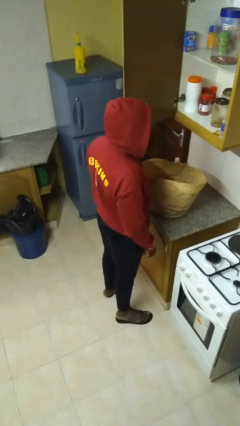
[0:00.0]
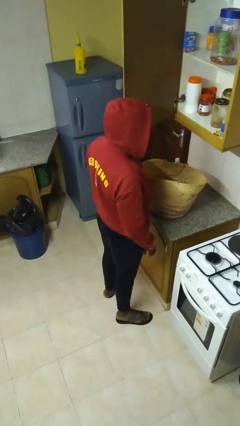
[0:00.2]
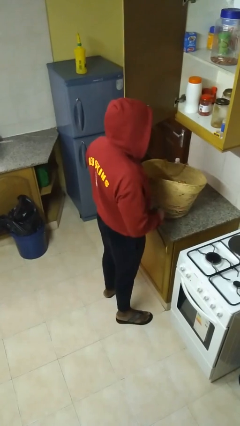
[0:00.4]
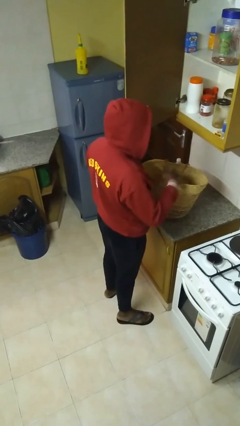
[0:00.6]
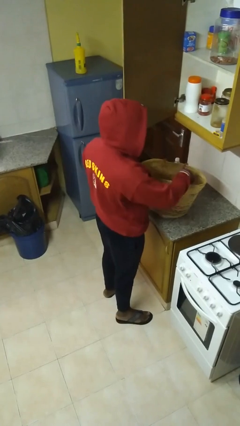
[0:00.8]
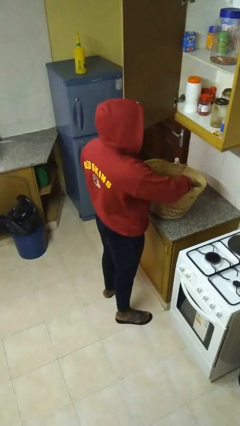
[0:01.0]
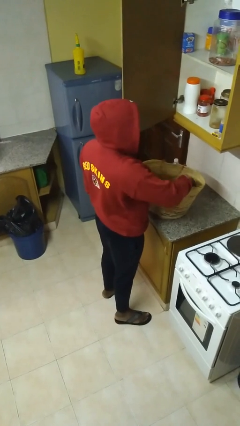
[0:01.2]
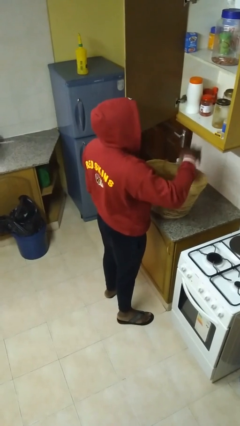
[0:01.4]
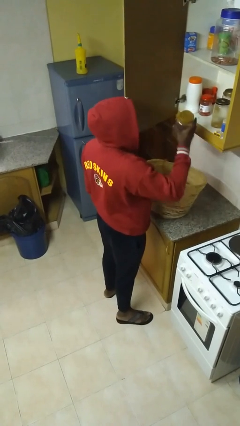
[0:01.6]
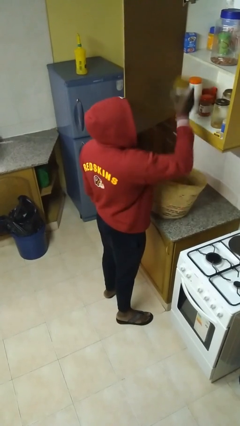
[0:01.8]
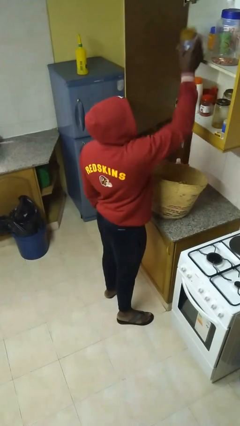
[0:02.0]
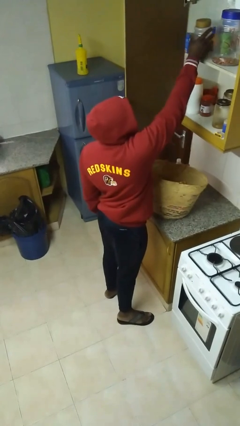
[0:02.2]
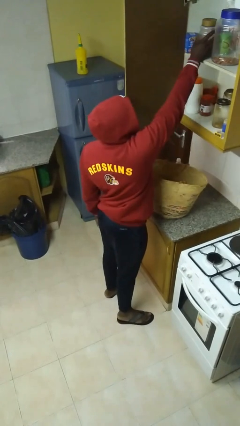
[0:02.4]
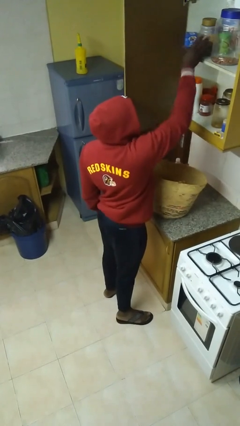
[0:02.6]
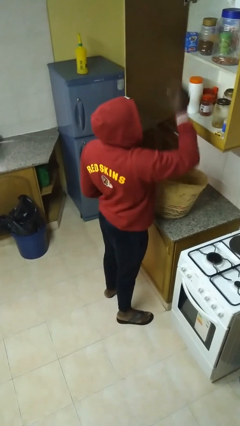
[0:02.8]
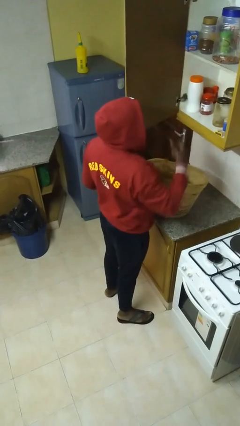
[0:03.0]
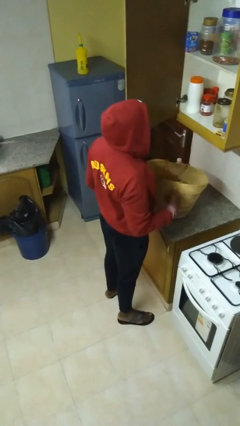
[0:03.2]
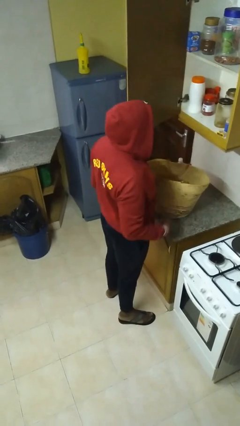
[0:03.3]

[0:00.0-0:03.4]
person loads groceries into cabinet

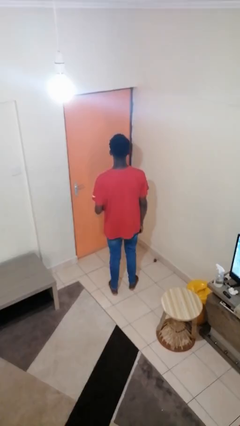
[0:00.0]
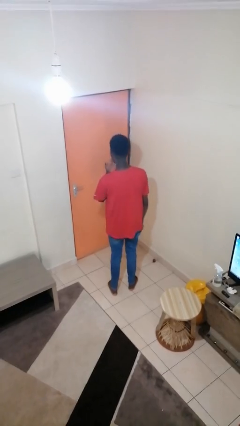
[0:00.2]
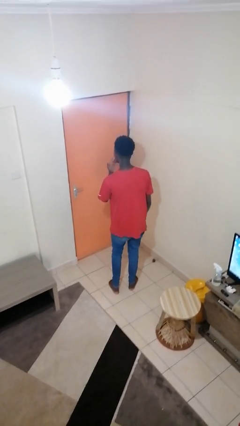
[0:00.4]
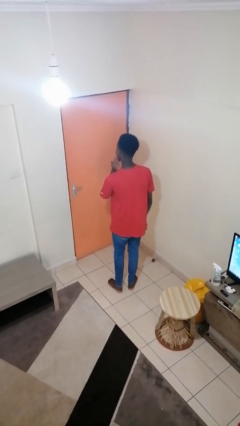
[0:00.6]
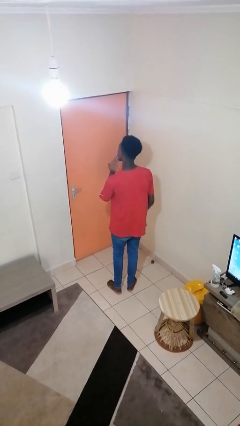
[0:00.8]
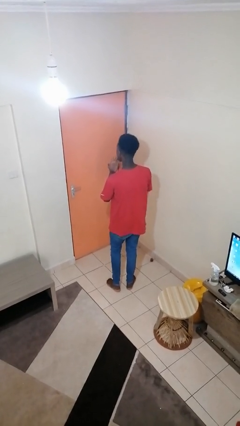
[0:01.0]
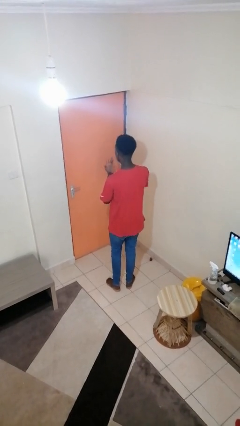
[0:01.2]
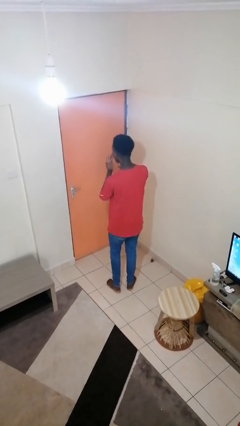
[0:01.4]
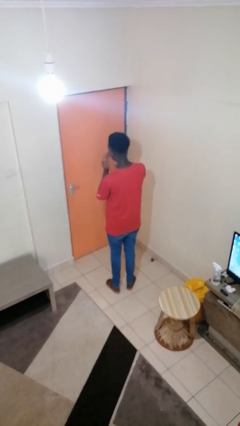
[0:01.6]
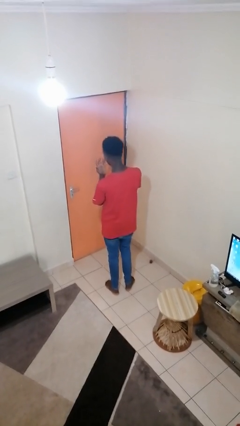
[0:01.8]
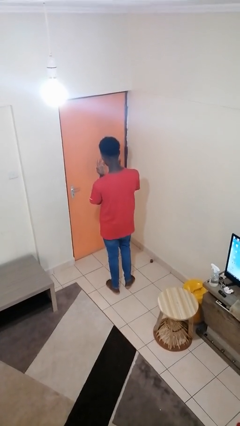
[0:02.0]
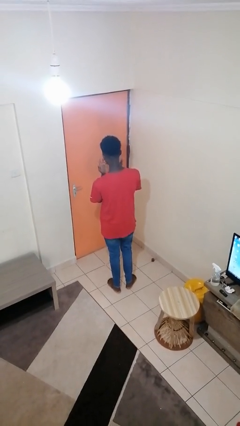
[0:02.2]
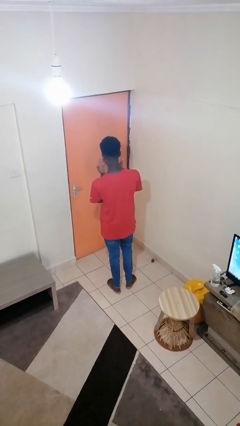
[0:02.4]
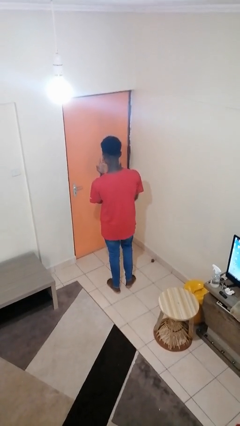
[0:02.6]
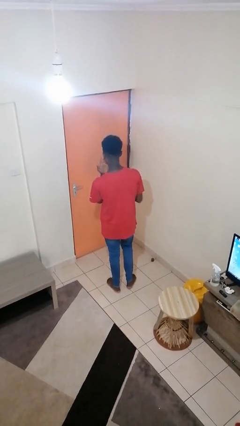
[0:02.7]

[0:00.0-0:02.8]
person licks fingers

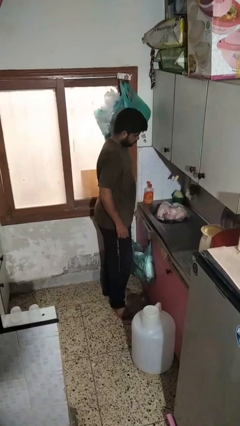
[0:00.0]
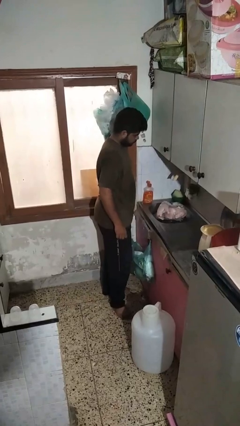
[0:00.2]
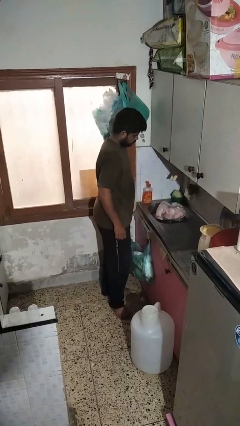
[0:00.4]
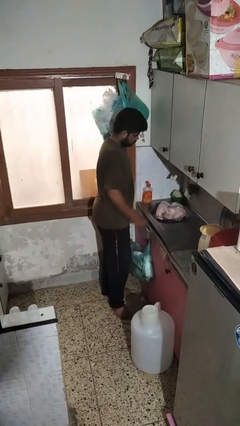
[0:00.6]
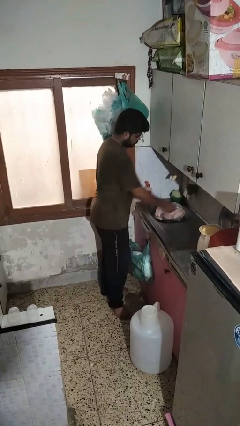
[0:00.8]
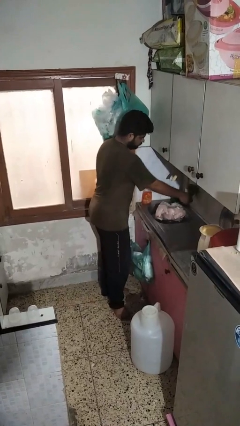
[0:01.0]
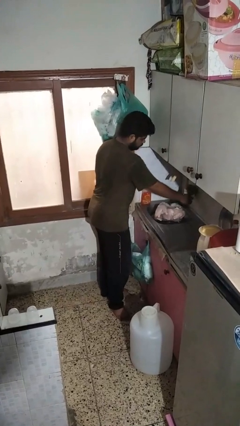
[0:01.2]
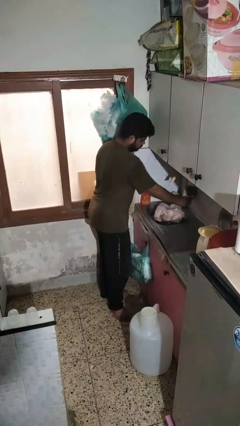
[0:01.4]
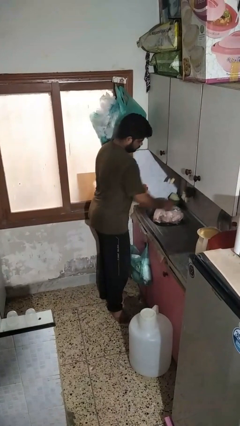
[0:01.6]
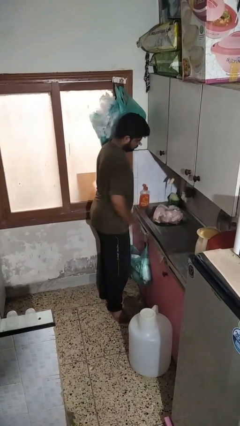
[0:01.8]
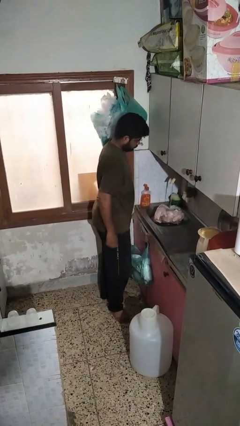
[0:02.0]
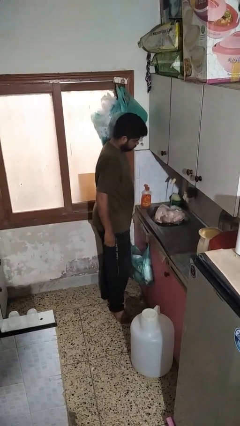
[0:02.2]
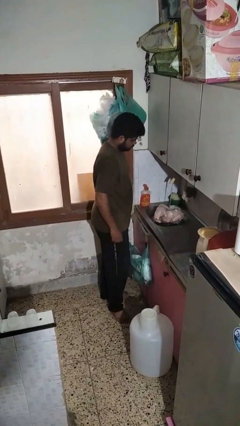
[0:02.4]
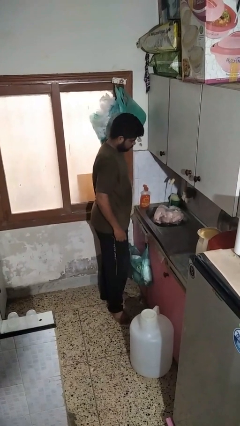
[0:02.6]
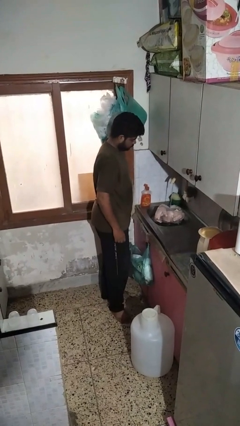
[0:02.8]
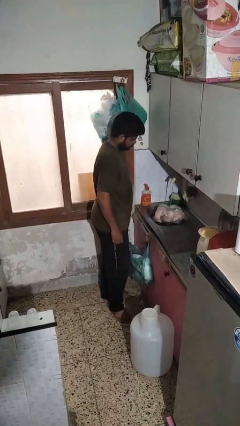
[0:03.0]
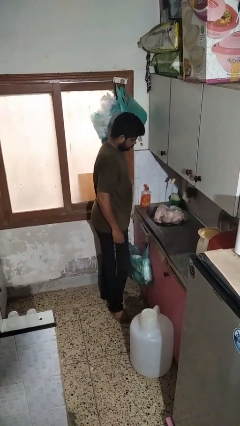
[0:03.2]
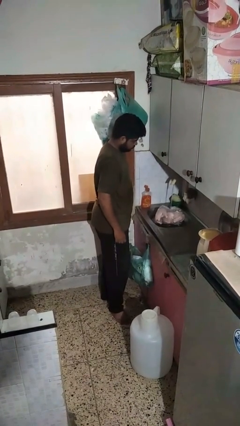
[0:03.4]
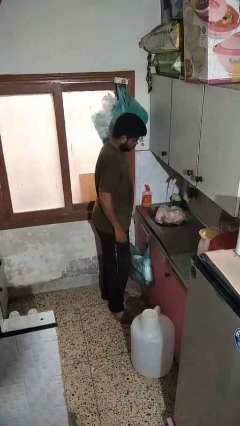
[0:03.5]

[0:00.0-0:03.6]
person turns on faucet

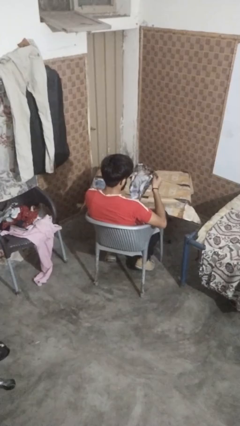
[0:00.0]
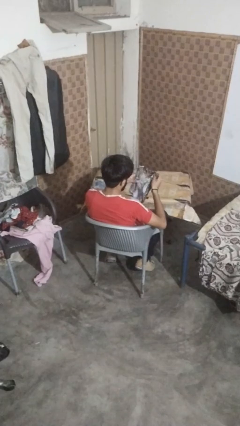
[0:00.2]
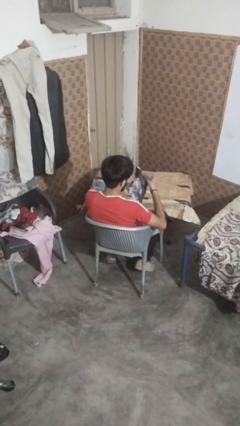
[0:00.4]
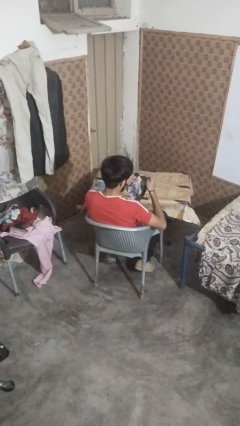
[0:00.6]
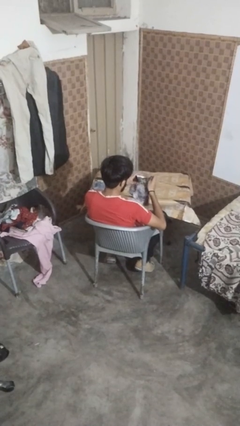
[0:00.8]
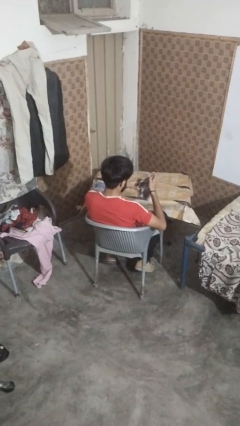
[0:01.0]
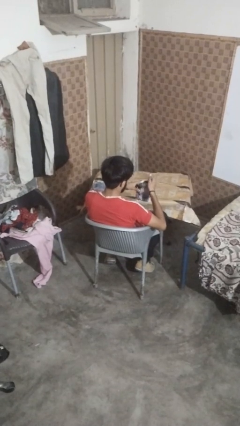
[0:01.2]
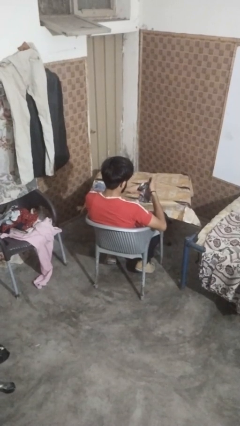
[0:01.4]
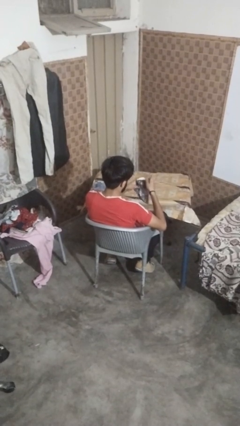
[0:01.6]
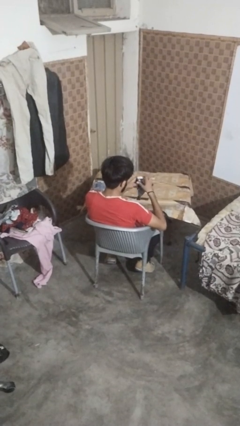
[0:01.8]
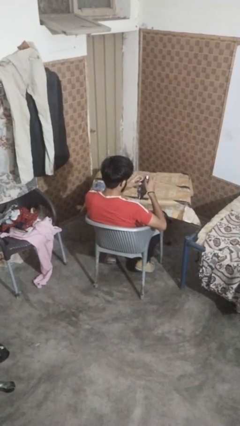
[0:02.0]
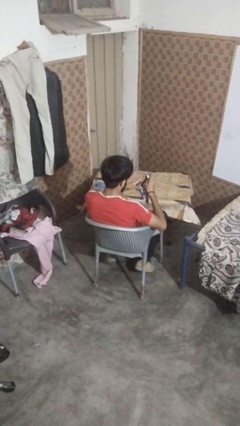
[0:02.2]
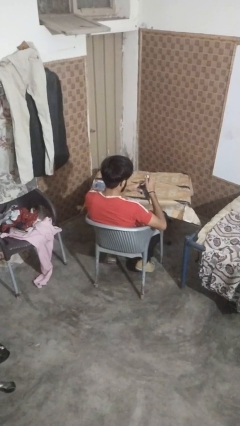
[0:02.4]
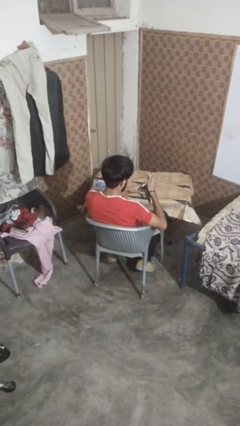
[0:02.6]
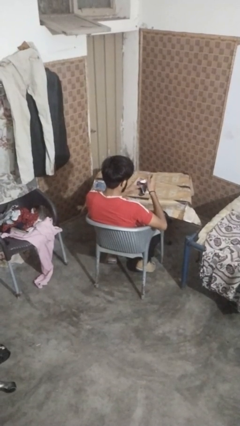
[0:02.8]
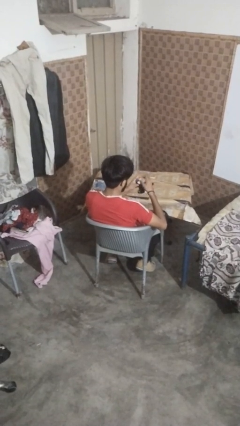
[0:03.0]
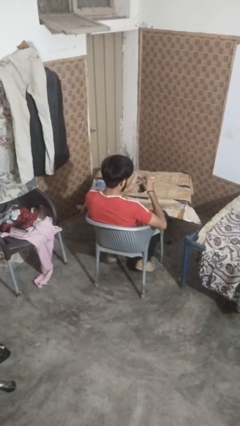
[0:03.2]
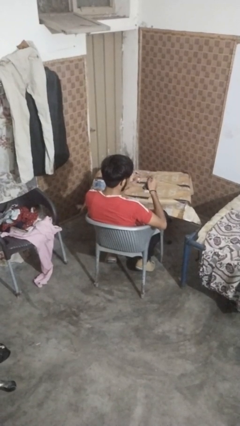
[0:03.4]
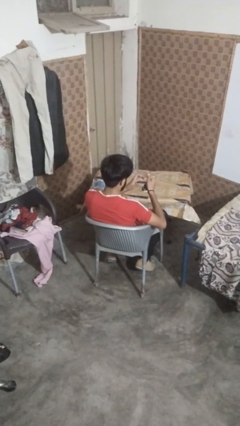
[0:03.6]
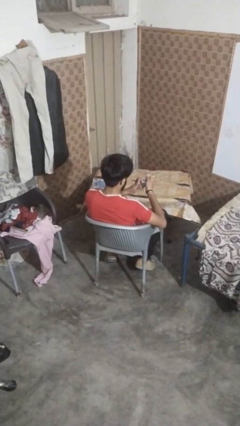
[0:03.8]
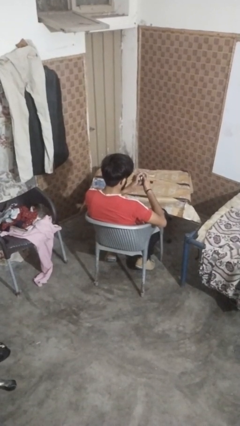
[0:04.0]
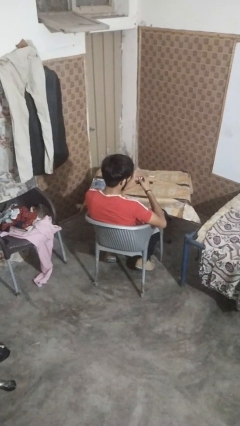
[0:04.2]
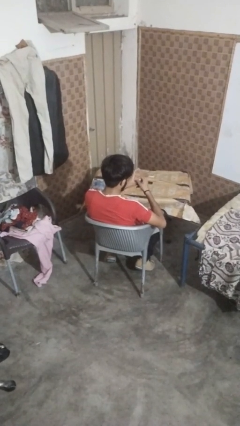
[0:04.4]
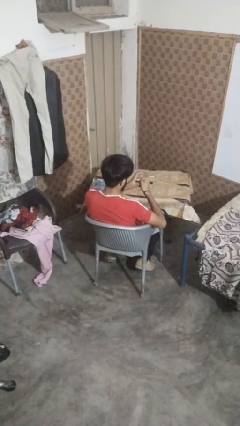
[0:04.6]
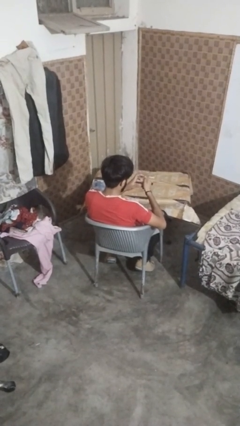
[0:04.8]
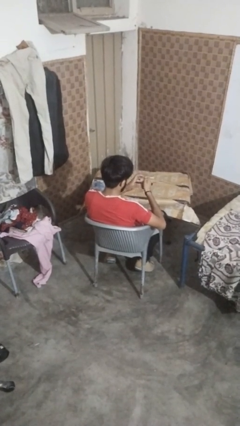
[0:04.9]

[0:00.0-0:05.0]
person crumples paper

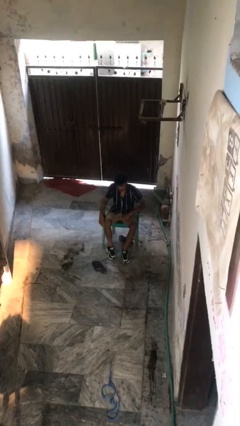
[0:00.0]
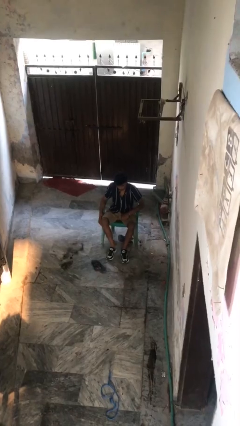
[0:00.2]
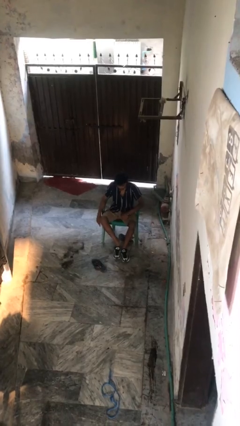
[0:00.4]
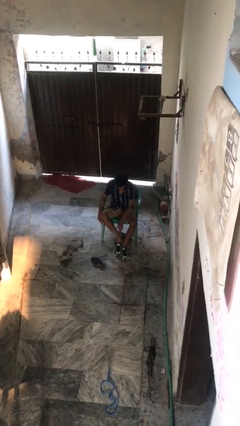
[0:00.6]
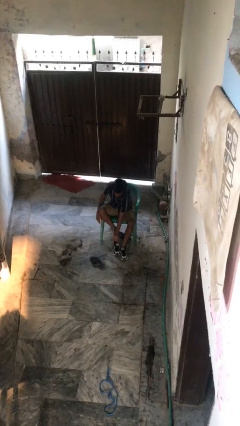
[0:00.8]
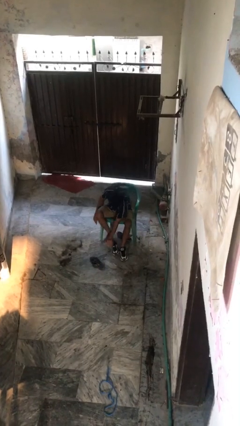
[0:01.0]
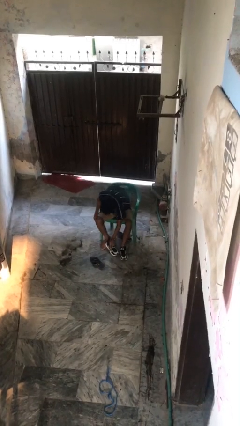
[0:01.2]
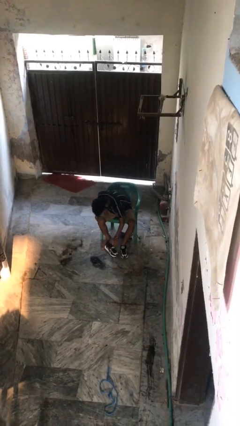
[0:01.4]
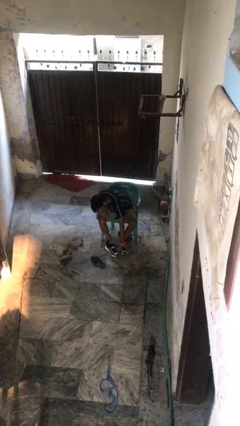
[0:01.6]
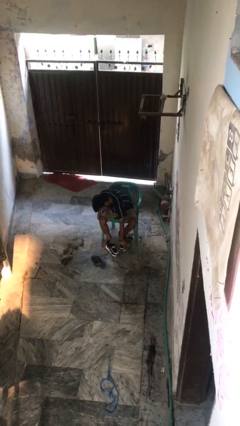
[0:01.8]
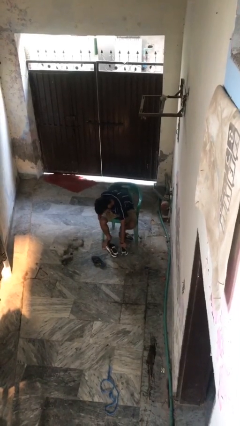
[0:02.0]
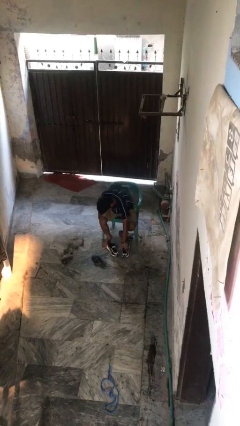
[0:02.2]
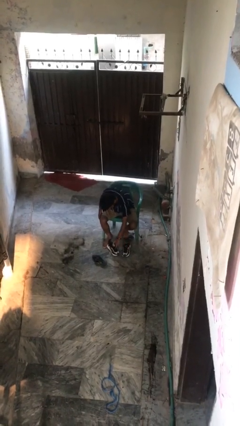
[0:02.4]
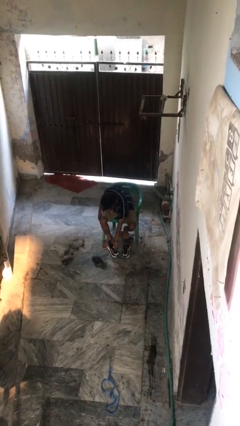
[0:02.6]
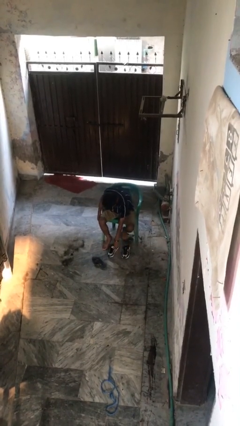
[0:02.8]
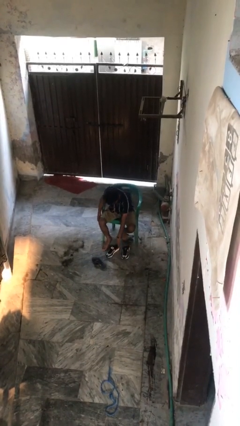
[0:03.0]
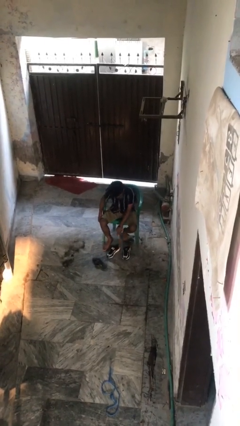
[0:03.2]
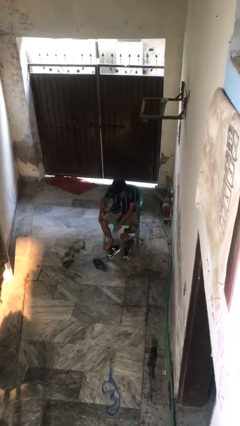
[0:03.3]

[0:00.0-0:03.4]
person takes off shoes
